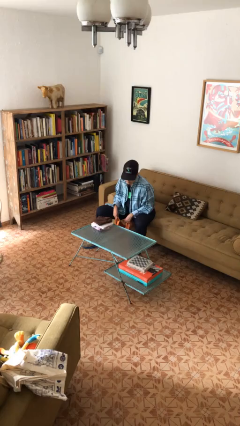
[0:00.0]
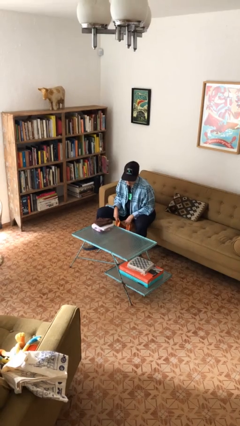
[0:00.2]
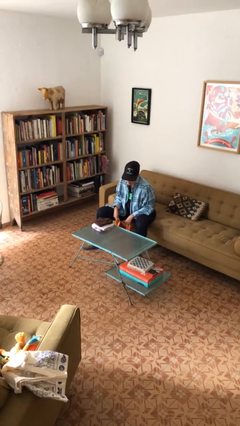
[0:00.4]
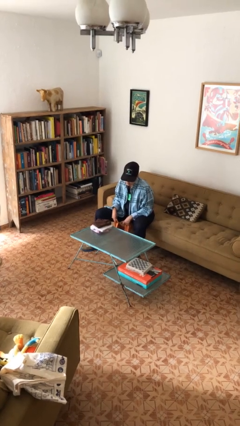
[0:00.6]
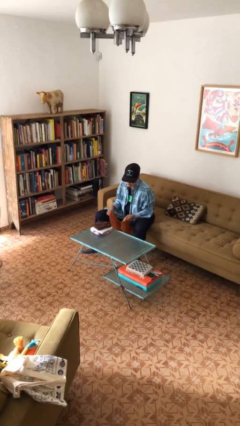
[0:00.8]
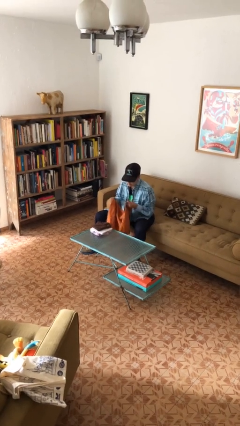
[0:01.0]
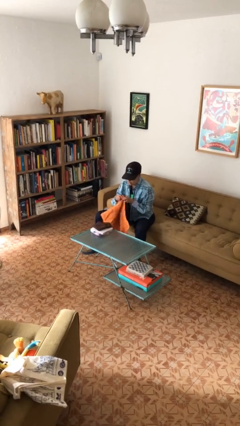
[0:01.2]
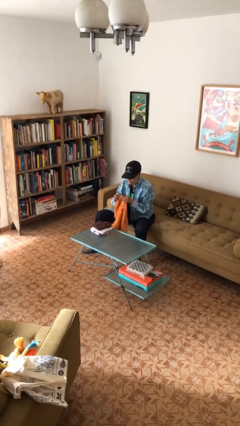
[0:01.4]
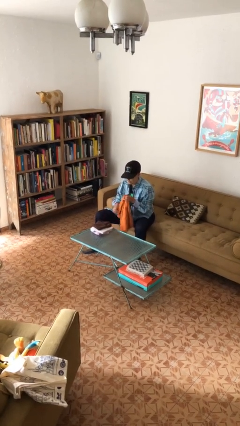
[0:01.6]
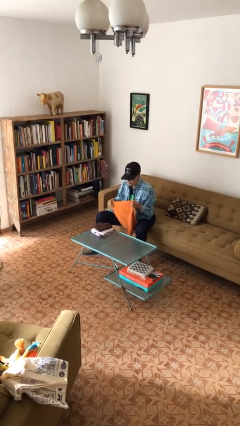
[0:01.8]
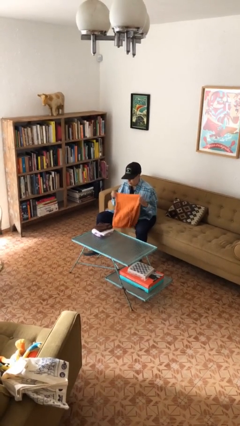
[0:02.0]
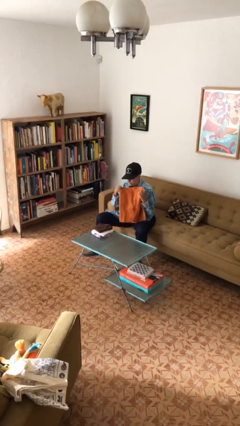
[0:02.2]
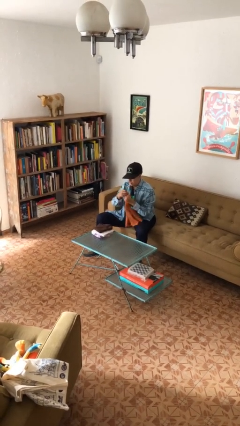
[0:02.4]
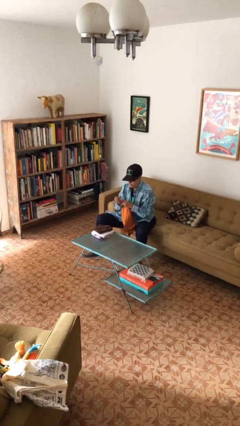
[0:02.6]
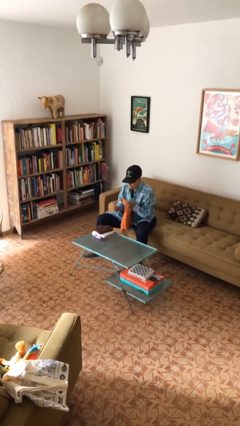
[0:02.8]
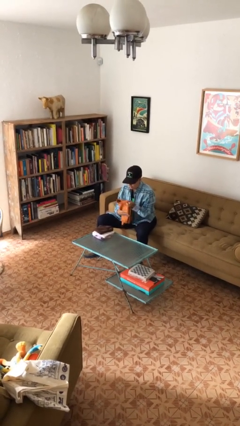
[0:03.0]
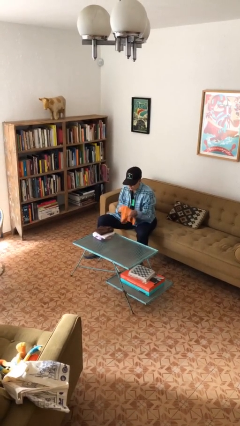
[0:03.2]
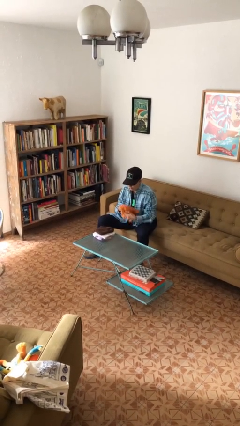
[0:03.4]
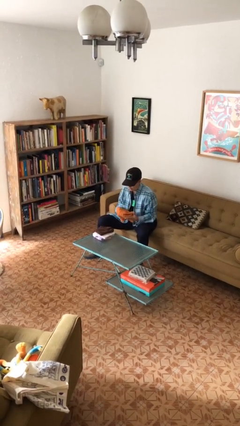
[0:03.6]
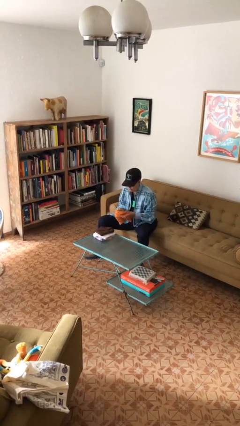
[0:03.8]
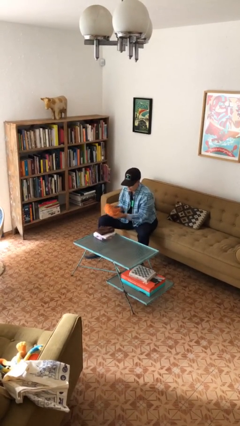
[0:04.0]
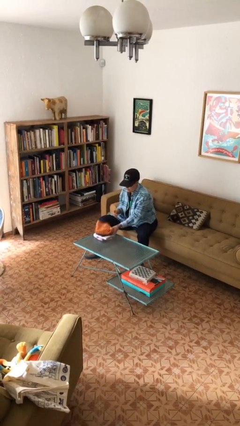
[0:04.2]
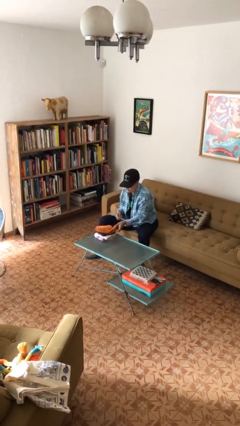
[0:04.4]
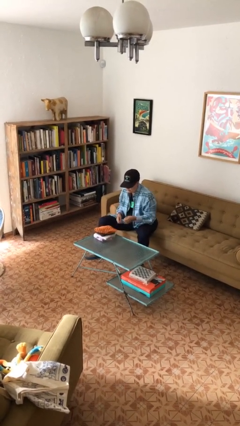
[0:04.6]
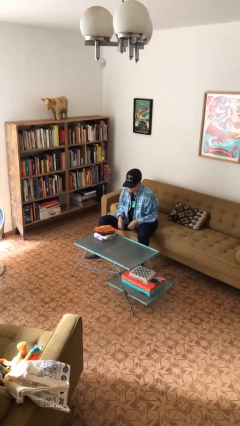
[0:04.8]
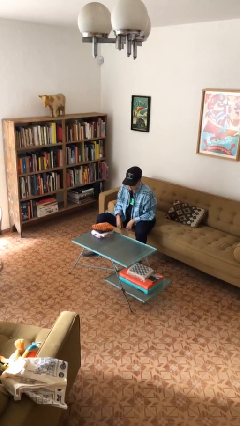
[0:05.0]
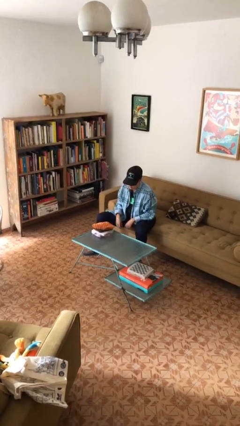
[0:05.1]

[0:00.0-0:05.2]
person folds towel

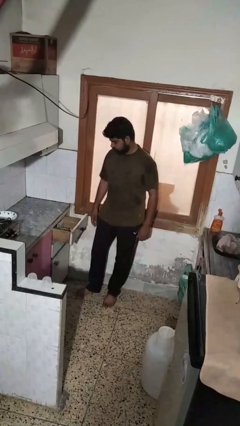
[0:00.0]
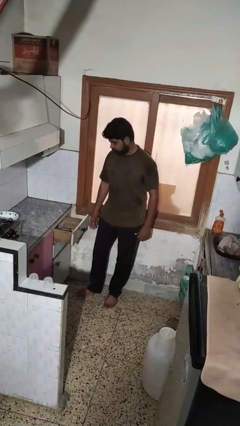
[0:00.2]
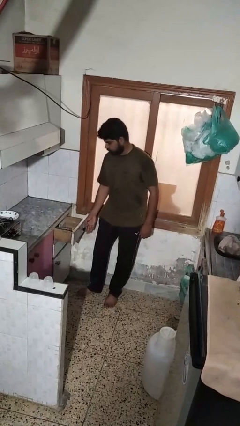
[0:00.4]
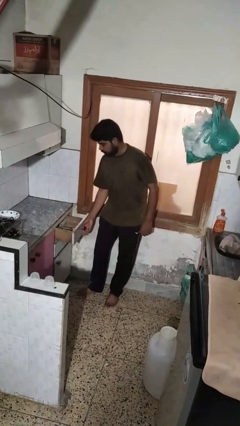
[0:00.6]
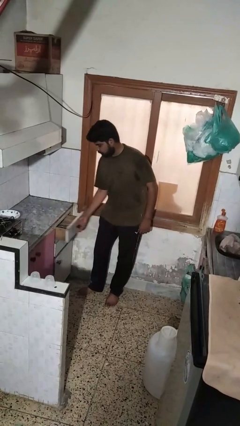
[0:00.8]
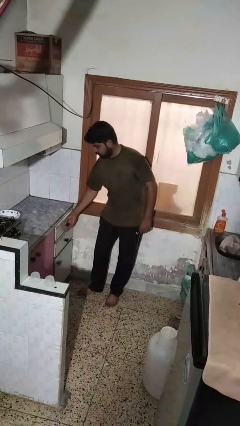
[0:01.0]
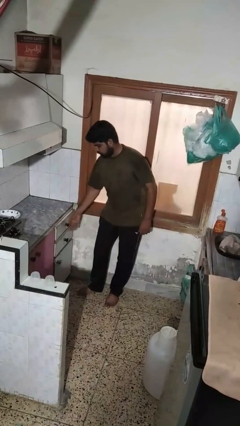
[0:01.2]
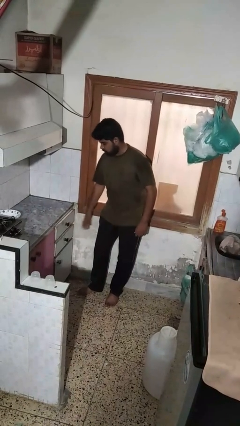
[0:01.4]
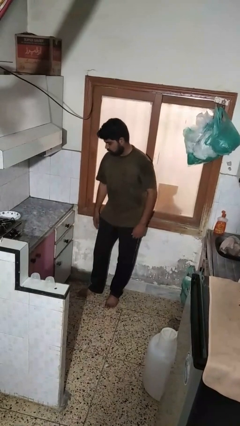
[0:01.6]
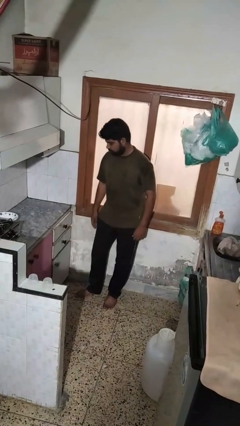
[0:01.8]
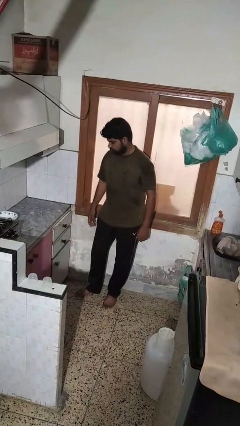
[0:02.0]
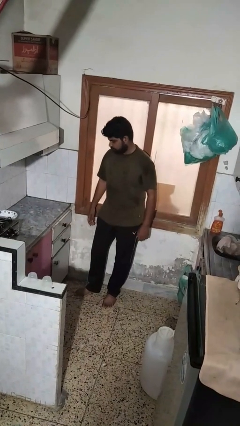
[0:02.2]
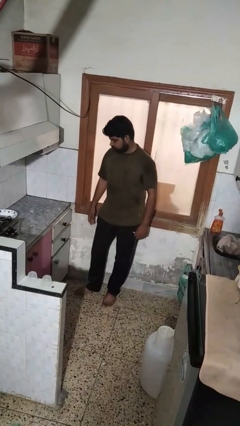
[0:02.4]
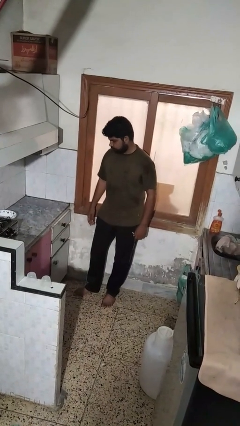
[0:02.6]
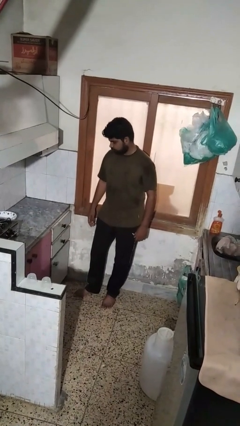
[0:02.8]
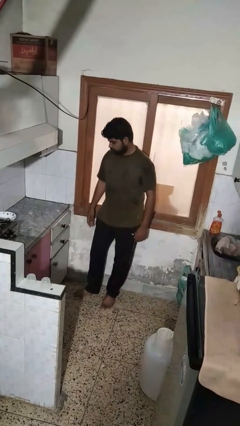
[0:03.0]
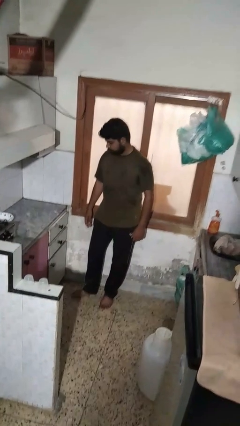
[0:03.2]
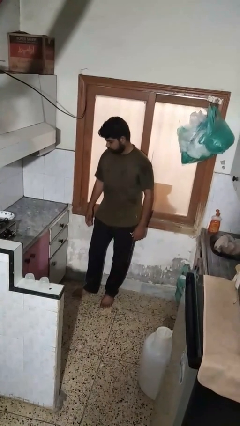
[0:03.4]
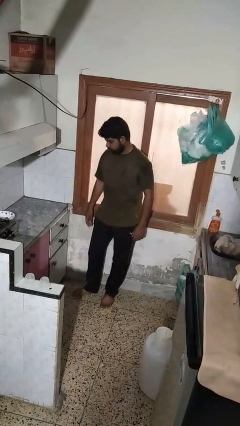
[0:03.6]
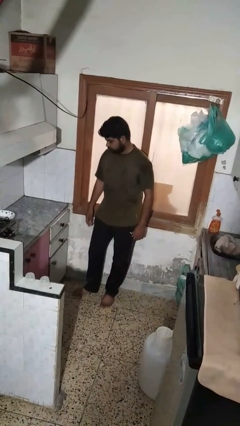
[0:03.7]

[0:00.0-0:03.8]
person closes kitchen drawer

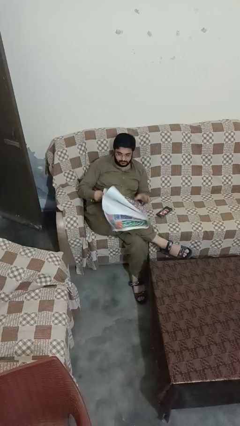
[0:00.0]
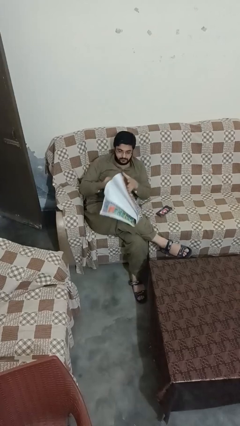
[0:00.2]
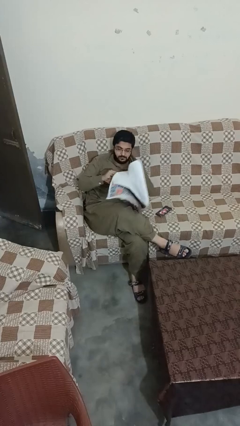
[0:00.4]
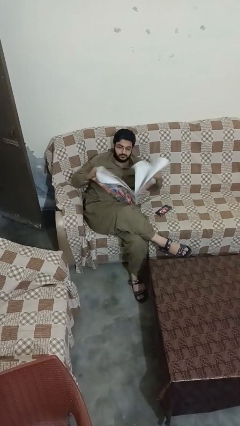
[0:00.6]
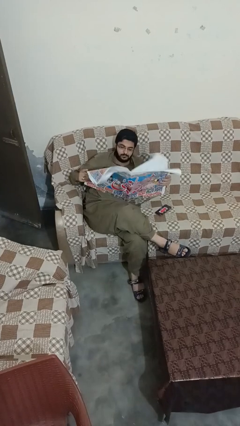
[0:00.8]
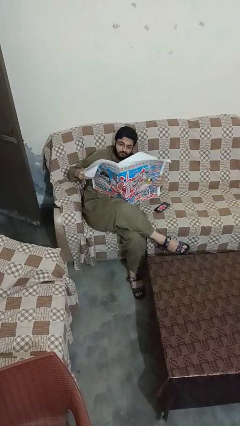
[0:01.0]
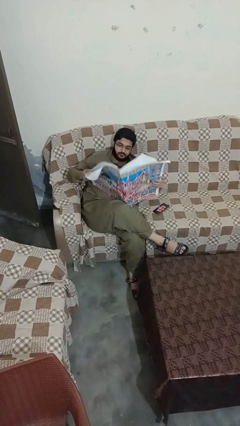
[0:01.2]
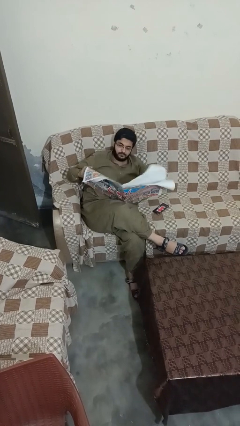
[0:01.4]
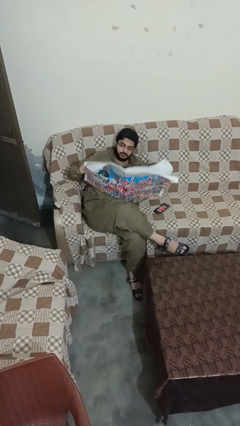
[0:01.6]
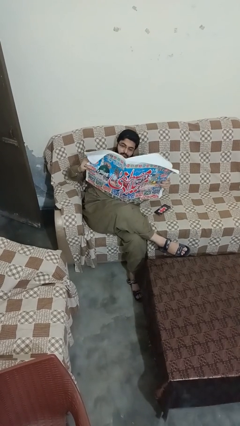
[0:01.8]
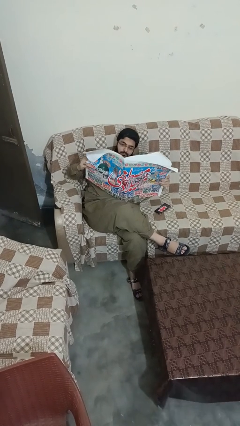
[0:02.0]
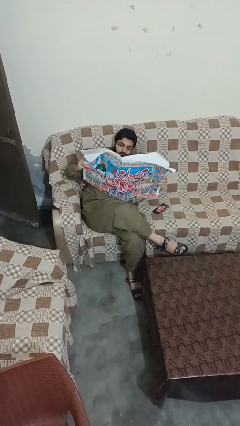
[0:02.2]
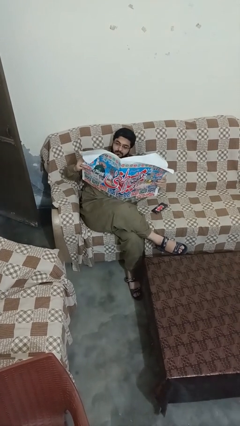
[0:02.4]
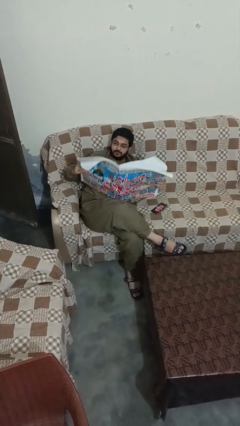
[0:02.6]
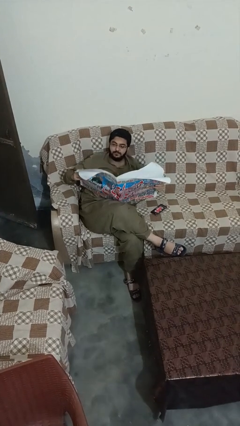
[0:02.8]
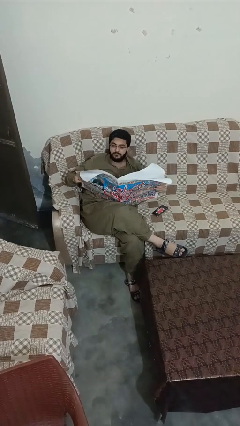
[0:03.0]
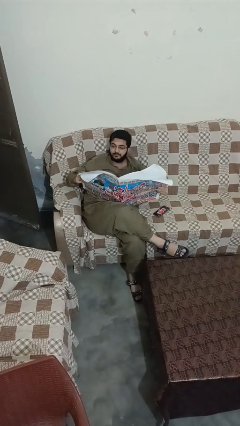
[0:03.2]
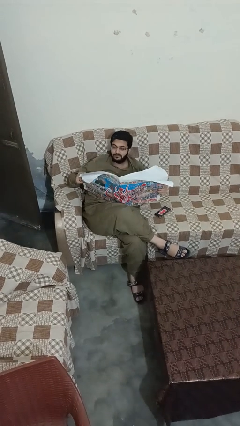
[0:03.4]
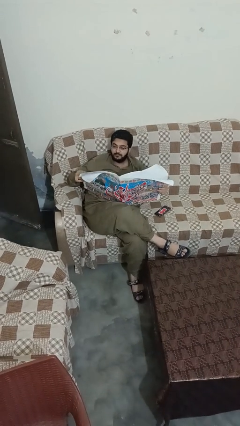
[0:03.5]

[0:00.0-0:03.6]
person reads newspaper

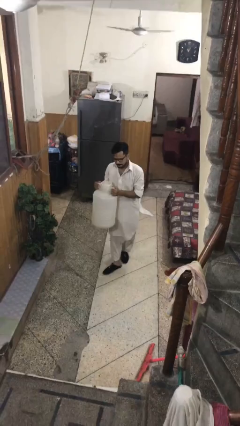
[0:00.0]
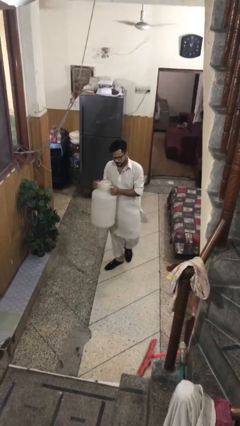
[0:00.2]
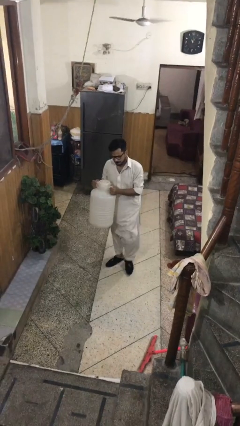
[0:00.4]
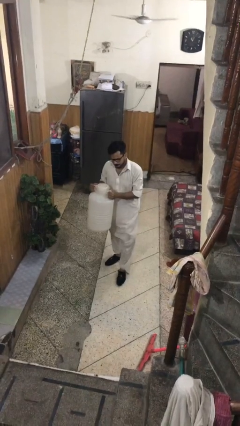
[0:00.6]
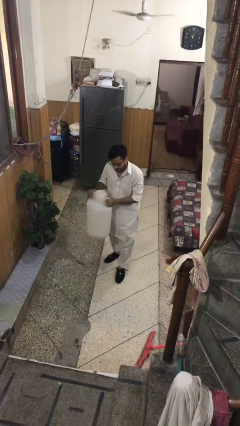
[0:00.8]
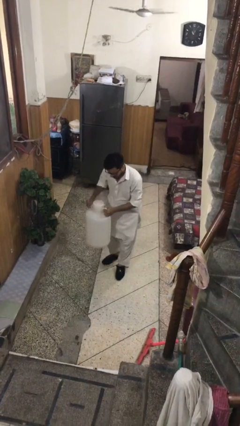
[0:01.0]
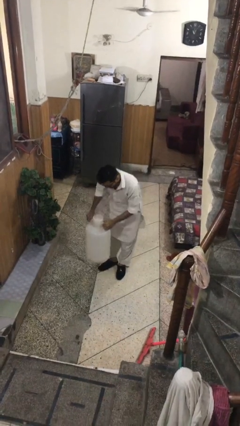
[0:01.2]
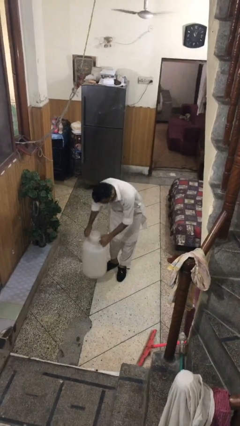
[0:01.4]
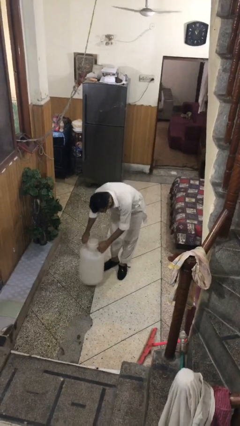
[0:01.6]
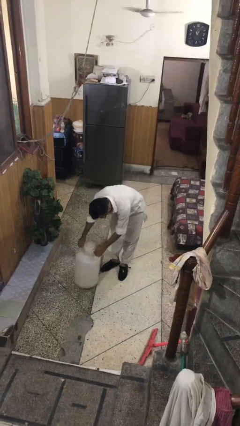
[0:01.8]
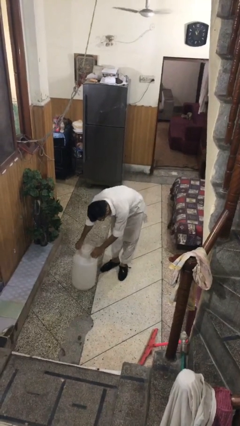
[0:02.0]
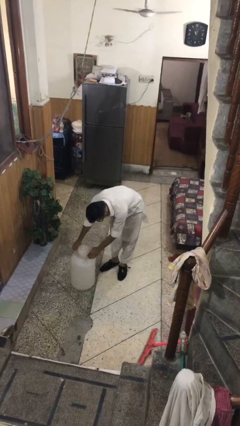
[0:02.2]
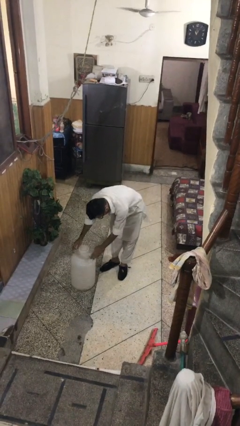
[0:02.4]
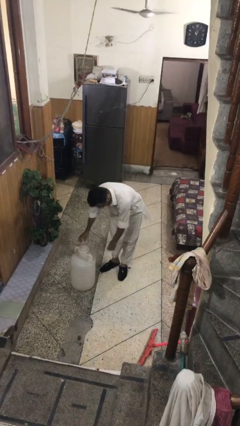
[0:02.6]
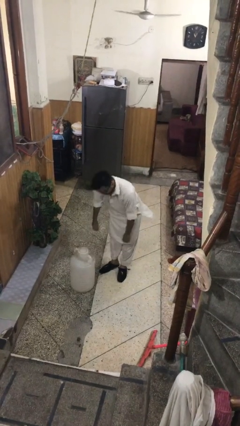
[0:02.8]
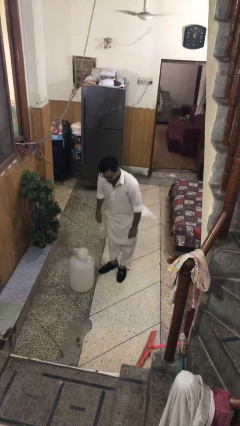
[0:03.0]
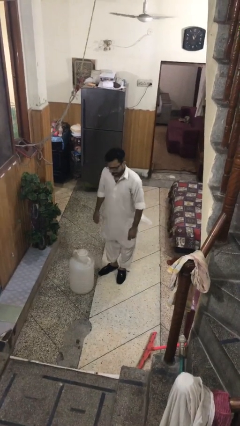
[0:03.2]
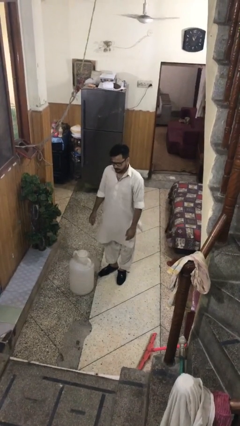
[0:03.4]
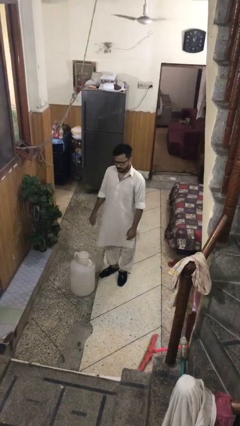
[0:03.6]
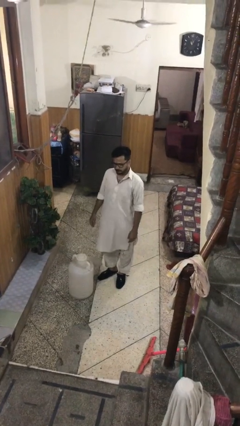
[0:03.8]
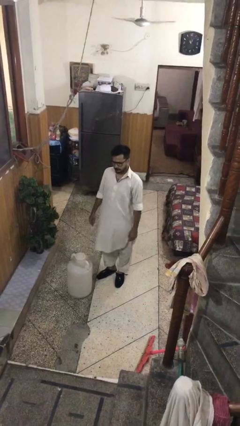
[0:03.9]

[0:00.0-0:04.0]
person puts down object on floor

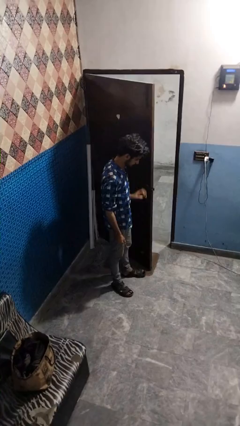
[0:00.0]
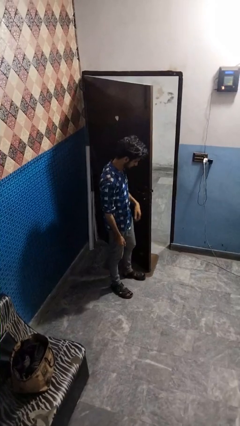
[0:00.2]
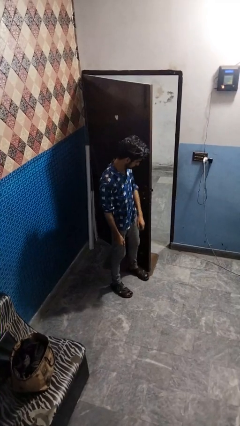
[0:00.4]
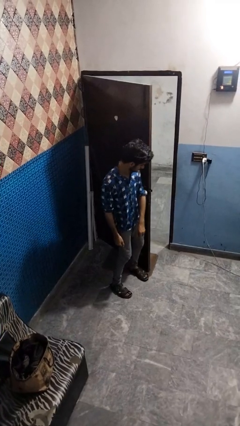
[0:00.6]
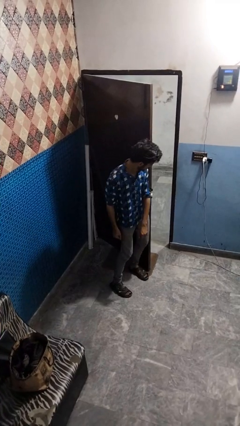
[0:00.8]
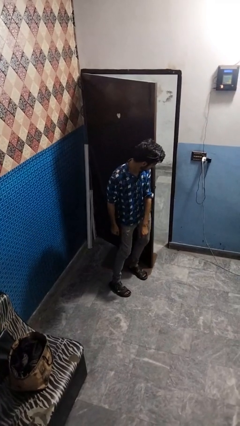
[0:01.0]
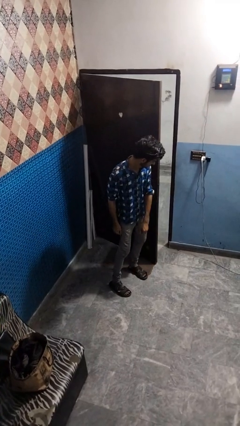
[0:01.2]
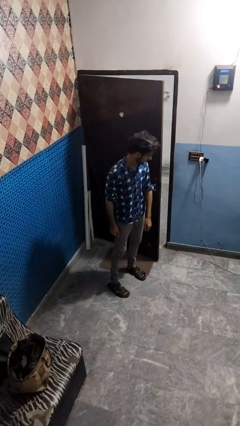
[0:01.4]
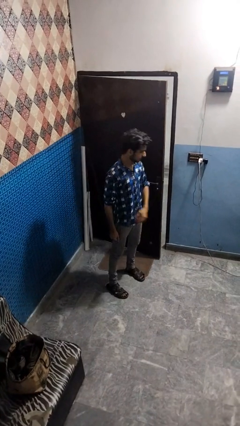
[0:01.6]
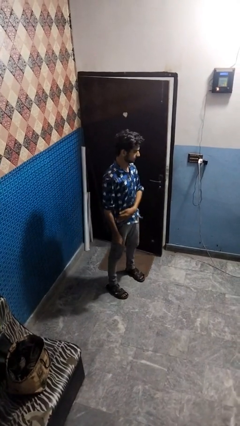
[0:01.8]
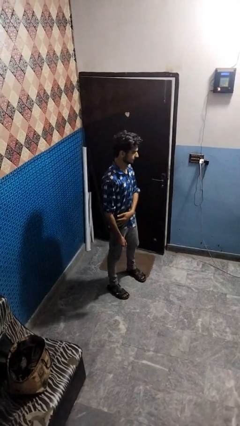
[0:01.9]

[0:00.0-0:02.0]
person closes door with hip
